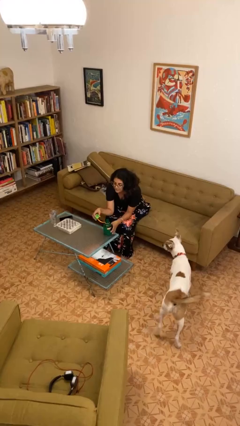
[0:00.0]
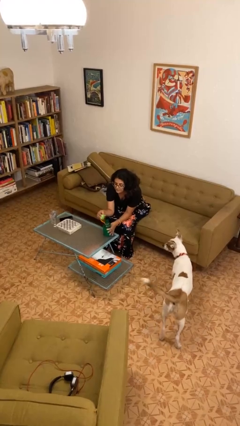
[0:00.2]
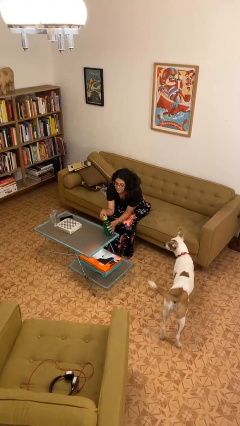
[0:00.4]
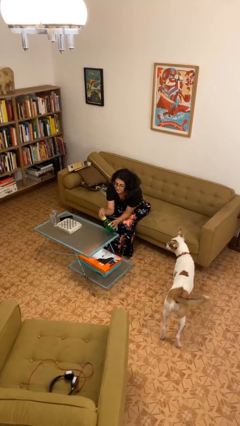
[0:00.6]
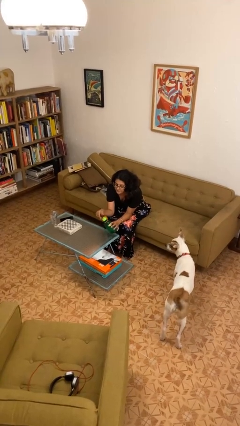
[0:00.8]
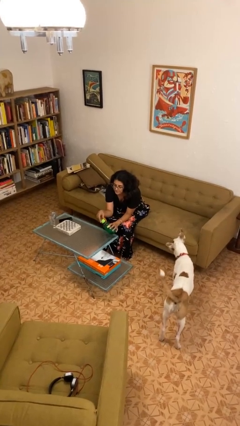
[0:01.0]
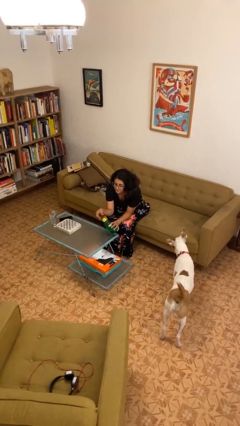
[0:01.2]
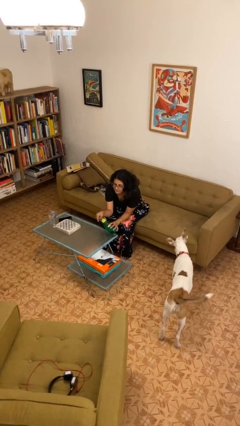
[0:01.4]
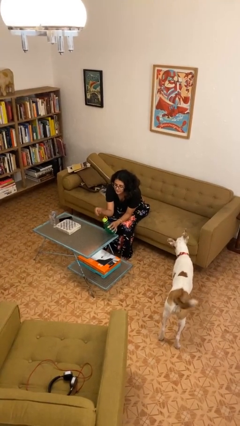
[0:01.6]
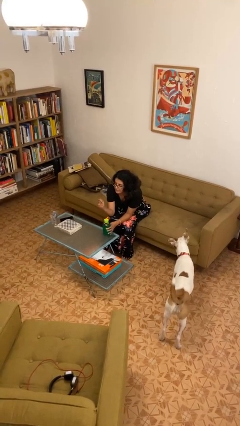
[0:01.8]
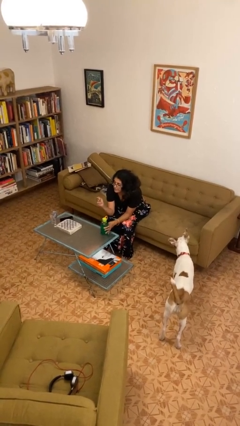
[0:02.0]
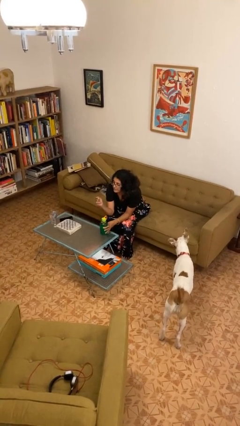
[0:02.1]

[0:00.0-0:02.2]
person screws lid to bottle

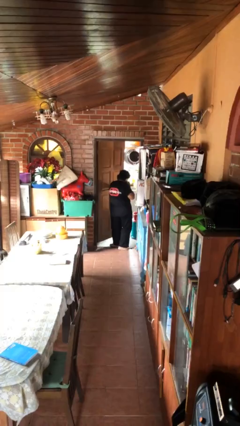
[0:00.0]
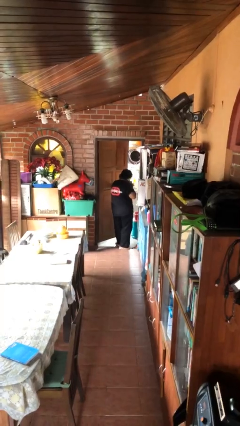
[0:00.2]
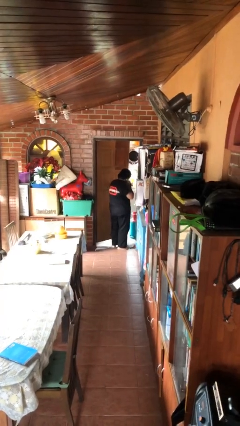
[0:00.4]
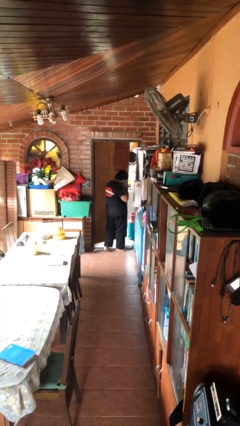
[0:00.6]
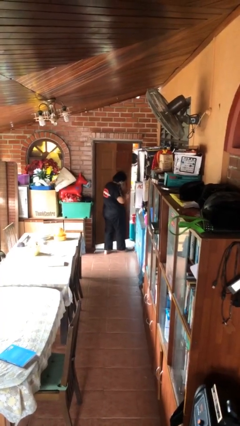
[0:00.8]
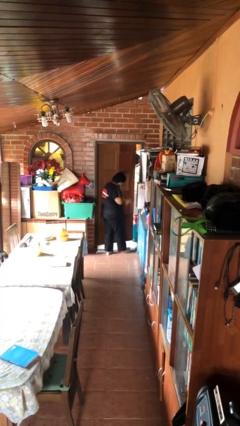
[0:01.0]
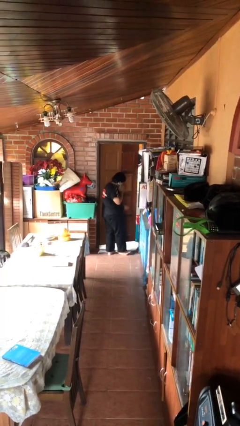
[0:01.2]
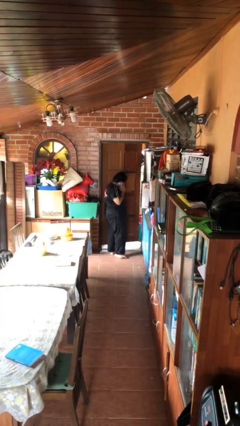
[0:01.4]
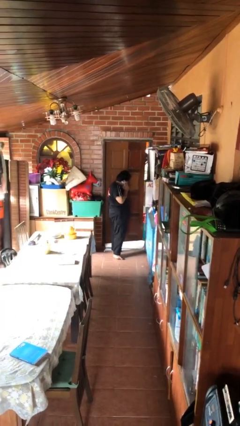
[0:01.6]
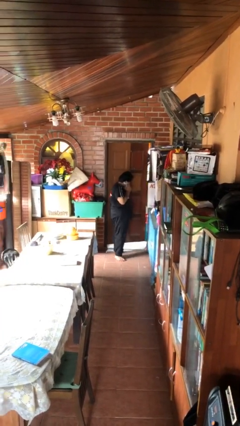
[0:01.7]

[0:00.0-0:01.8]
person closes facility door

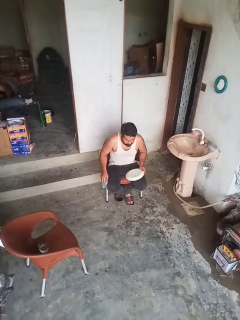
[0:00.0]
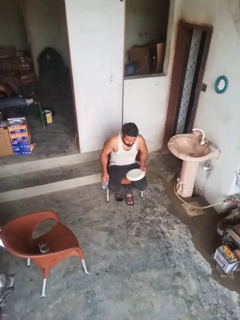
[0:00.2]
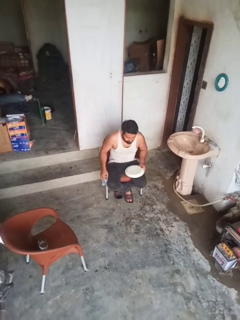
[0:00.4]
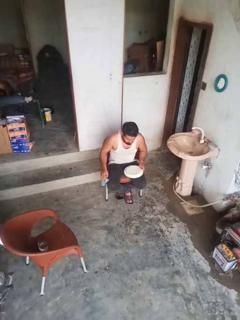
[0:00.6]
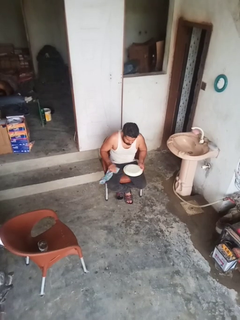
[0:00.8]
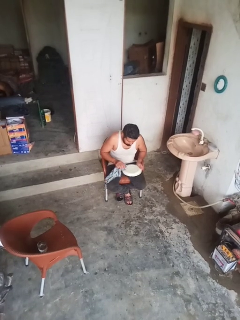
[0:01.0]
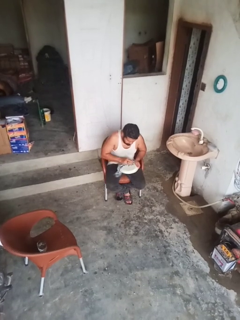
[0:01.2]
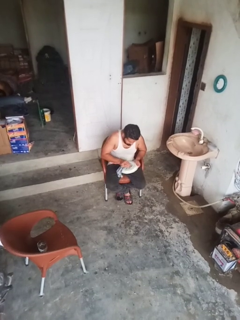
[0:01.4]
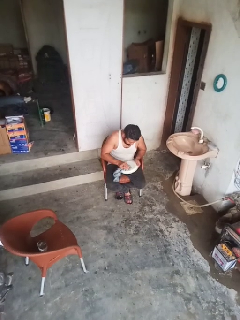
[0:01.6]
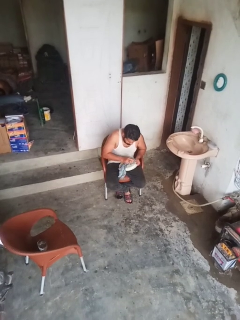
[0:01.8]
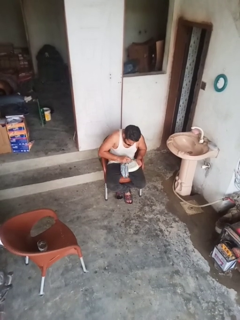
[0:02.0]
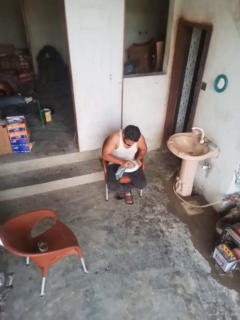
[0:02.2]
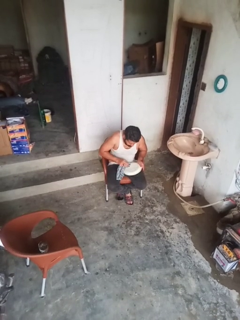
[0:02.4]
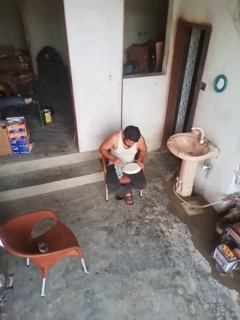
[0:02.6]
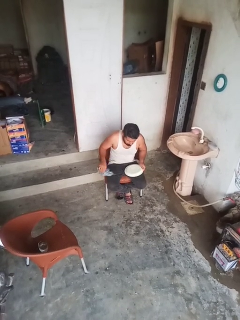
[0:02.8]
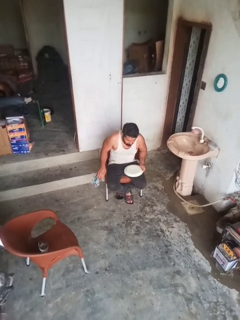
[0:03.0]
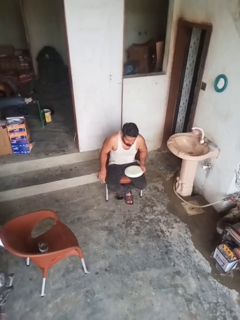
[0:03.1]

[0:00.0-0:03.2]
person dries dish

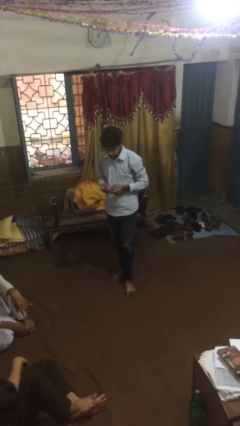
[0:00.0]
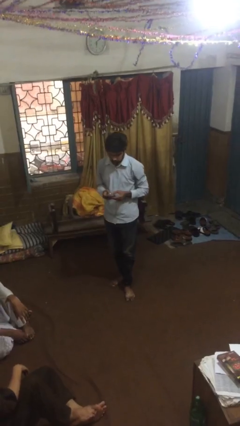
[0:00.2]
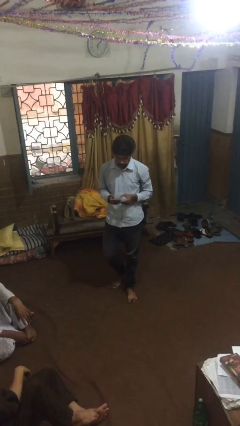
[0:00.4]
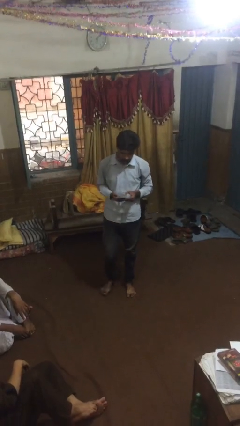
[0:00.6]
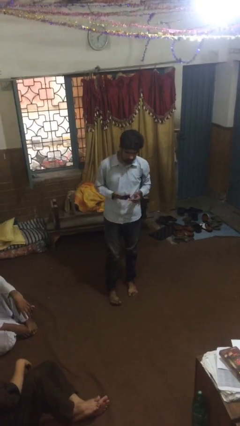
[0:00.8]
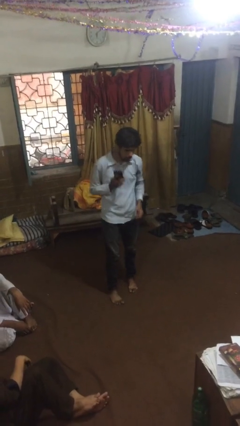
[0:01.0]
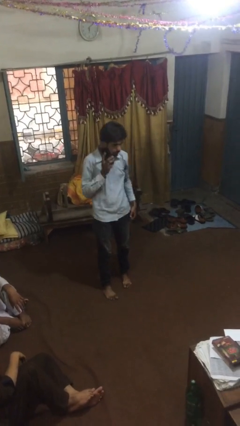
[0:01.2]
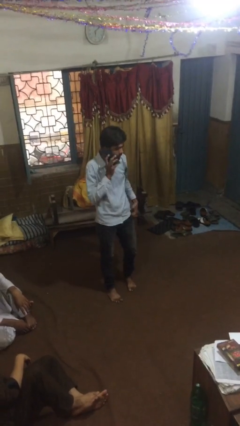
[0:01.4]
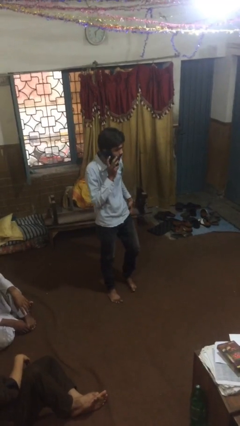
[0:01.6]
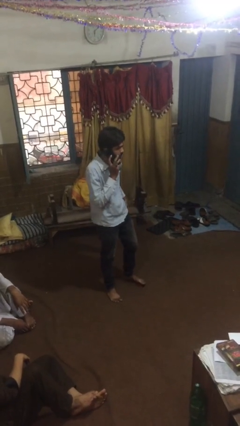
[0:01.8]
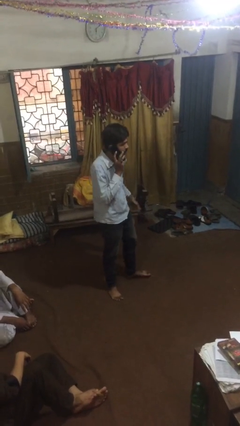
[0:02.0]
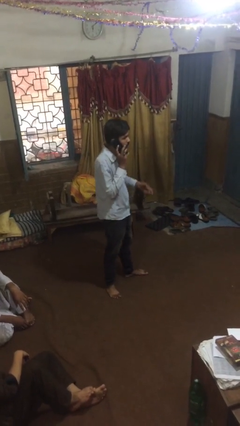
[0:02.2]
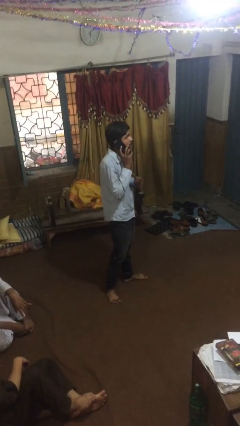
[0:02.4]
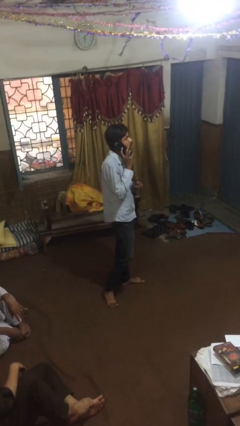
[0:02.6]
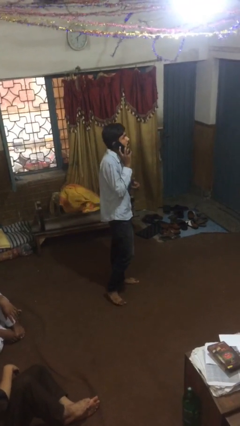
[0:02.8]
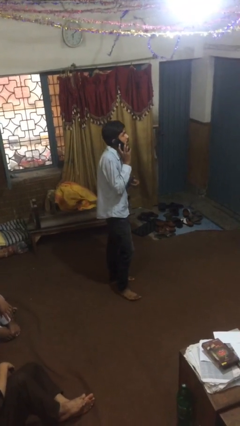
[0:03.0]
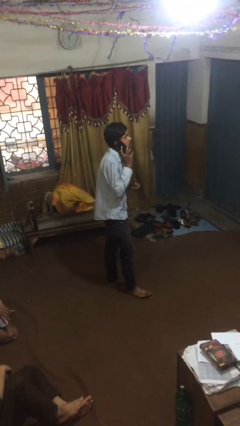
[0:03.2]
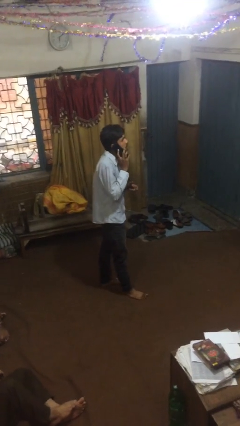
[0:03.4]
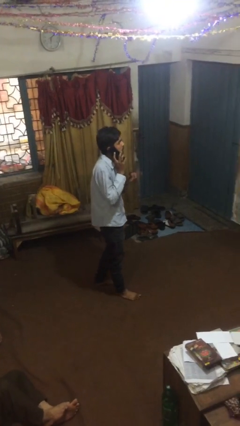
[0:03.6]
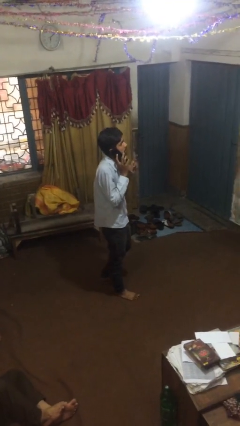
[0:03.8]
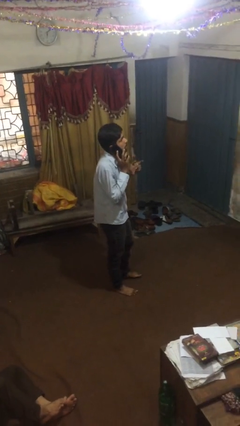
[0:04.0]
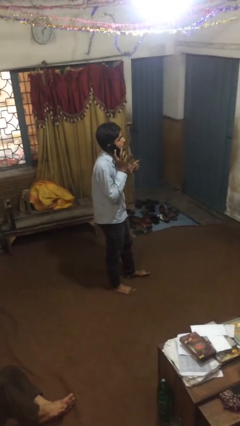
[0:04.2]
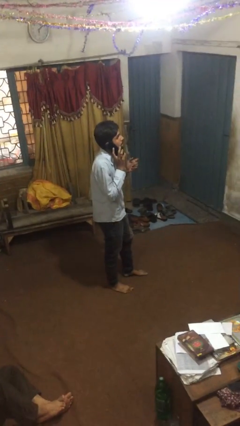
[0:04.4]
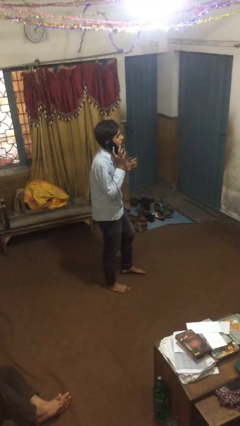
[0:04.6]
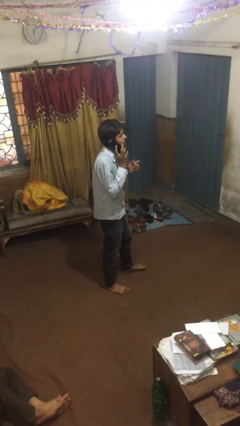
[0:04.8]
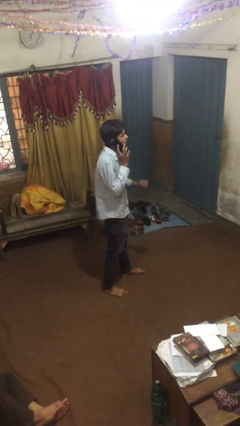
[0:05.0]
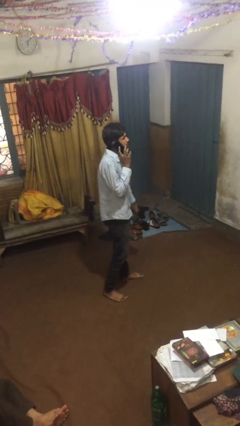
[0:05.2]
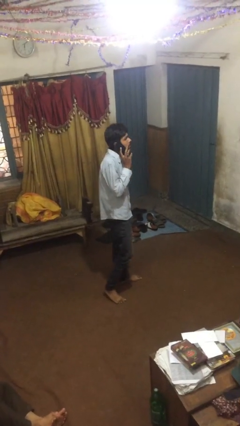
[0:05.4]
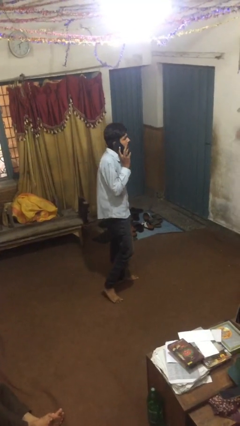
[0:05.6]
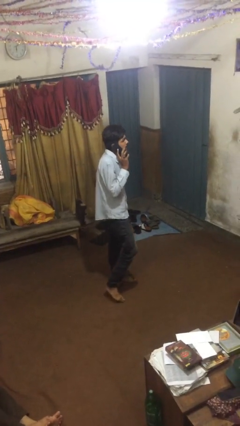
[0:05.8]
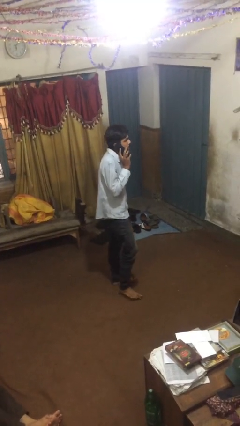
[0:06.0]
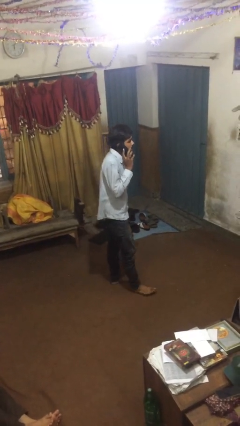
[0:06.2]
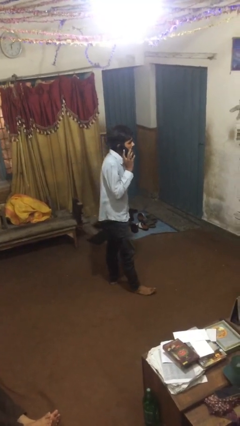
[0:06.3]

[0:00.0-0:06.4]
person talks on phone

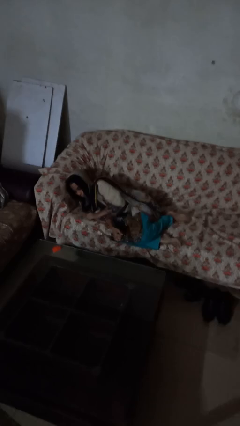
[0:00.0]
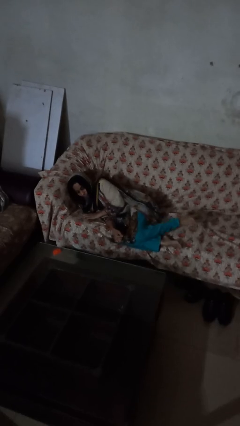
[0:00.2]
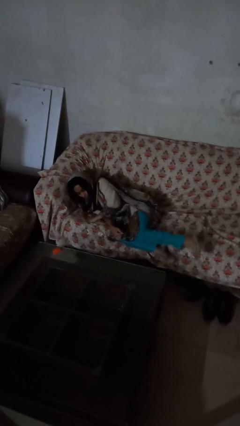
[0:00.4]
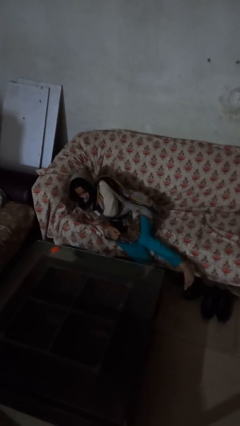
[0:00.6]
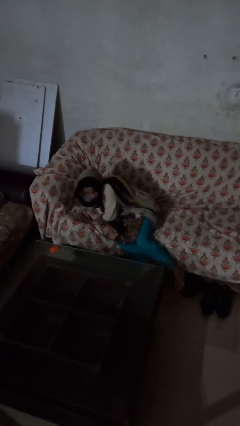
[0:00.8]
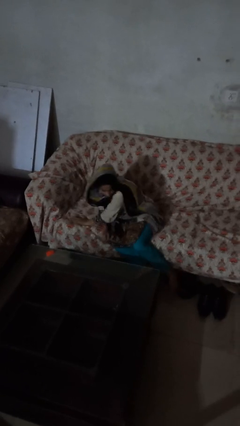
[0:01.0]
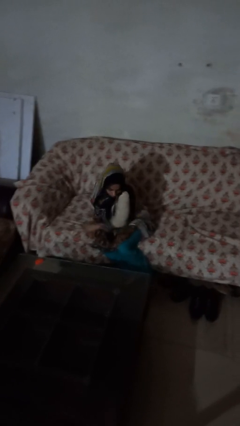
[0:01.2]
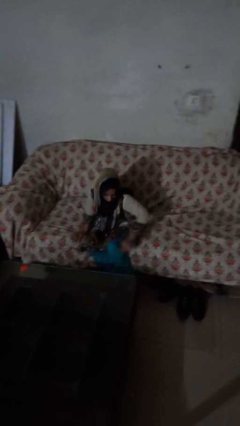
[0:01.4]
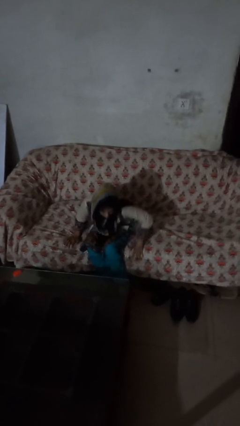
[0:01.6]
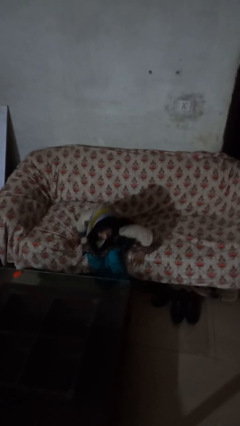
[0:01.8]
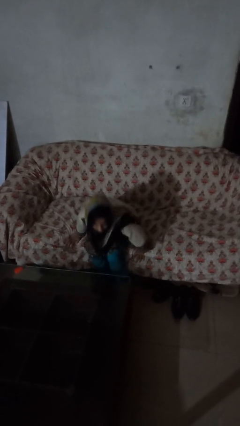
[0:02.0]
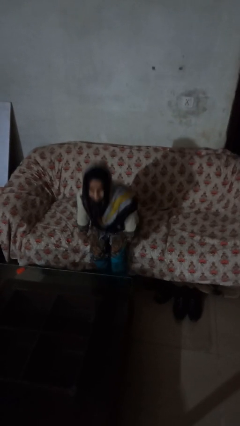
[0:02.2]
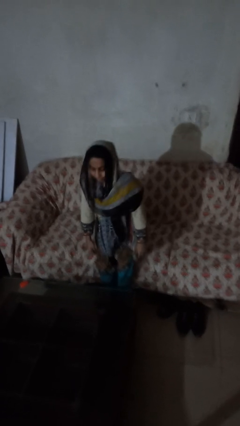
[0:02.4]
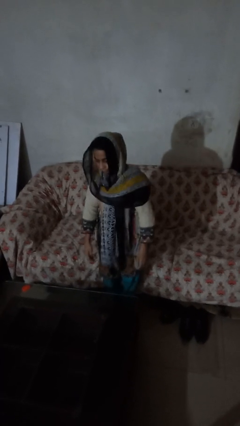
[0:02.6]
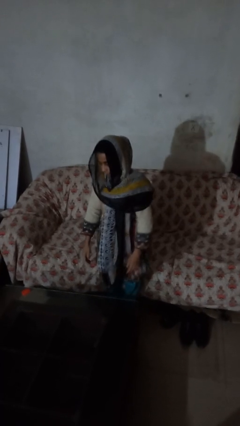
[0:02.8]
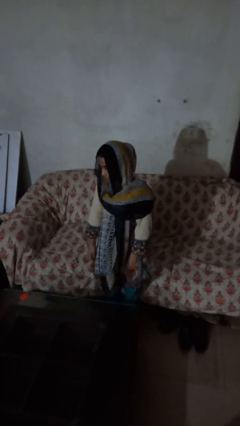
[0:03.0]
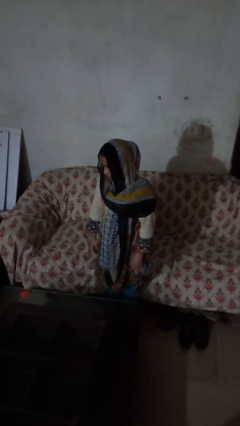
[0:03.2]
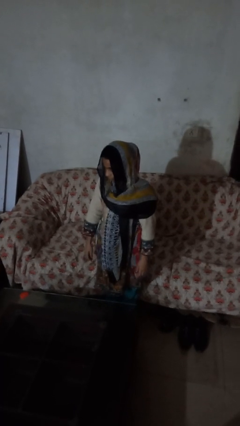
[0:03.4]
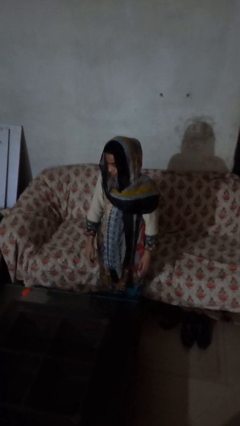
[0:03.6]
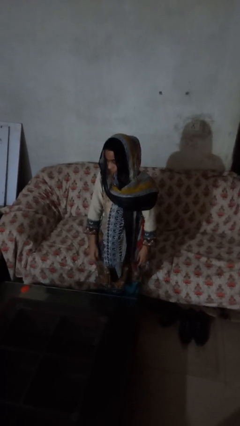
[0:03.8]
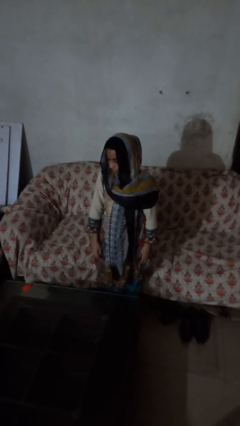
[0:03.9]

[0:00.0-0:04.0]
person stands up
